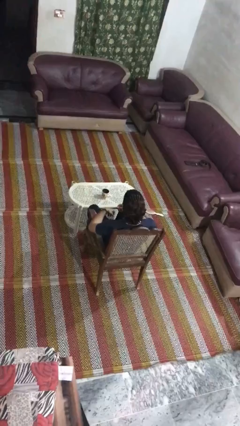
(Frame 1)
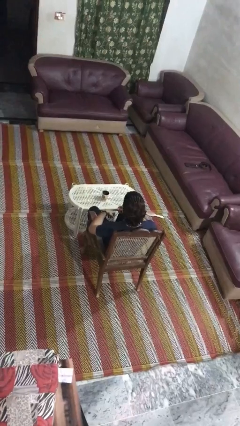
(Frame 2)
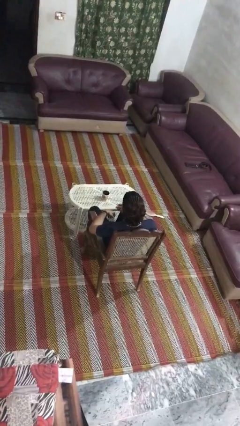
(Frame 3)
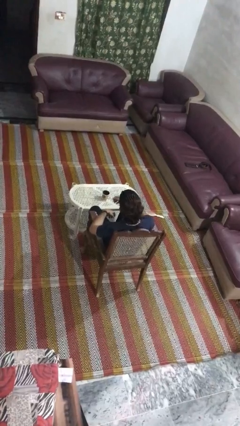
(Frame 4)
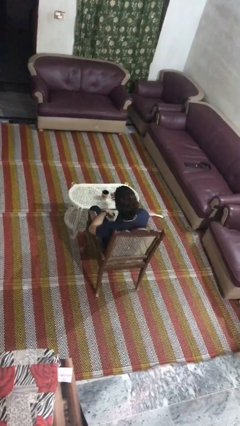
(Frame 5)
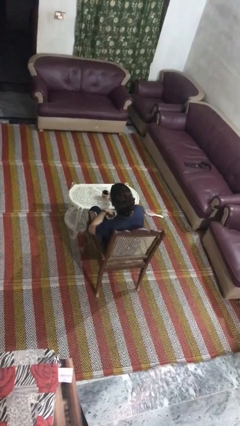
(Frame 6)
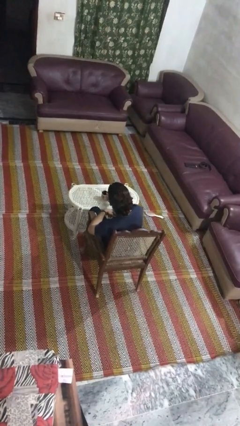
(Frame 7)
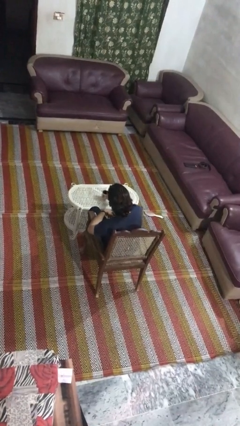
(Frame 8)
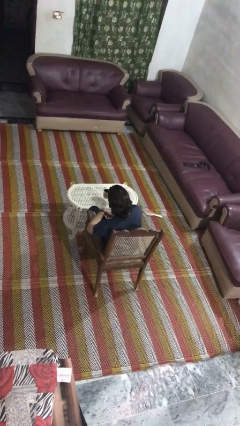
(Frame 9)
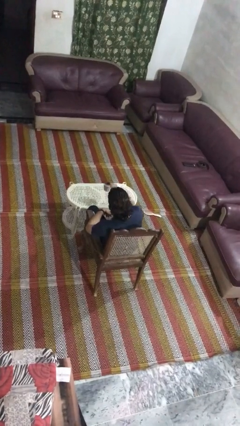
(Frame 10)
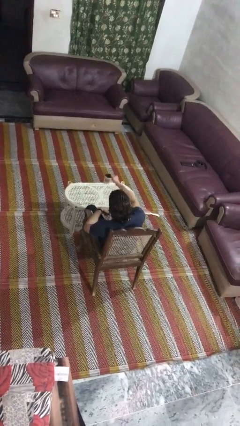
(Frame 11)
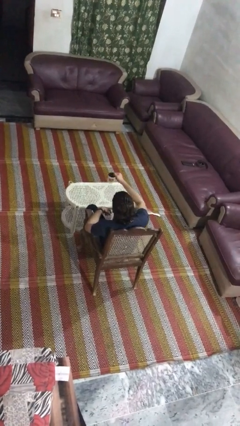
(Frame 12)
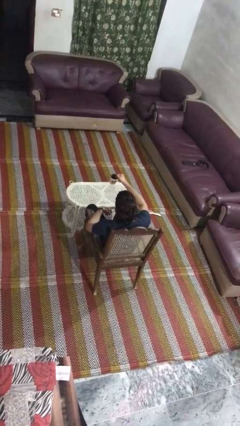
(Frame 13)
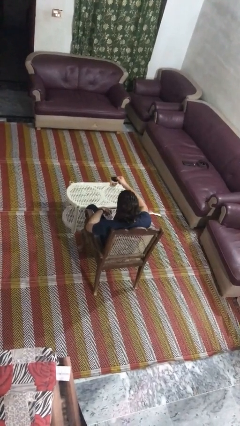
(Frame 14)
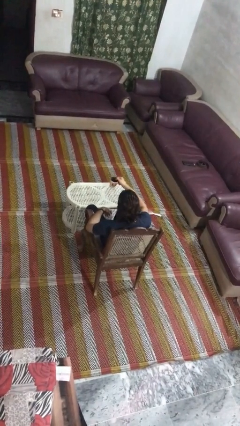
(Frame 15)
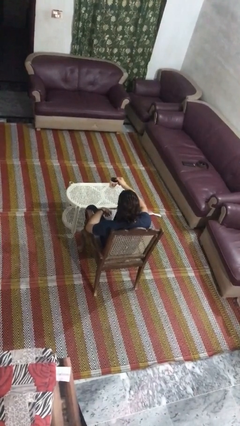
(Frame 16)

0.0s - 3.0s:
person picks up object from table

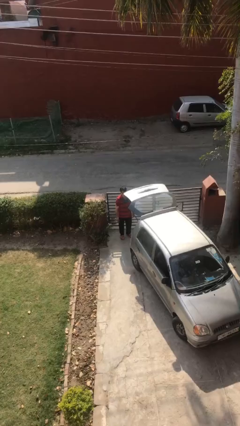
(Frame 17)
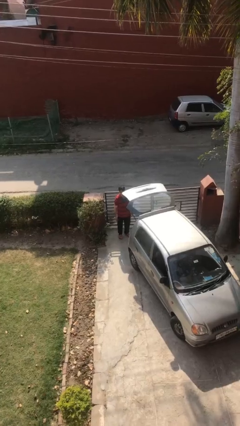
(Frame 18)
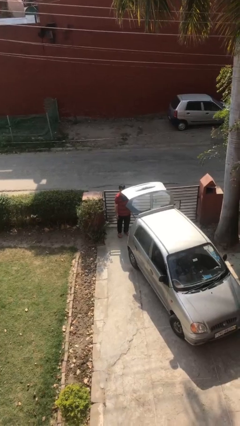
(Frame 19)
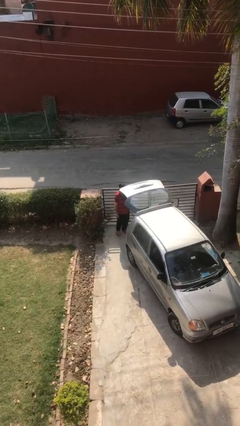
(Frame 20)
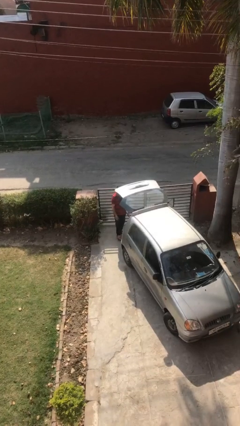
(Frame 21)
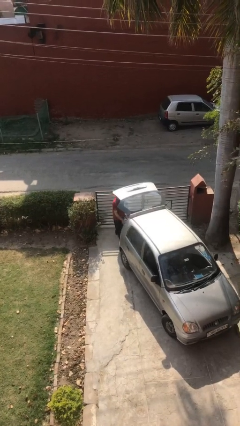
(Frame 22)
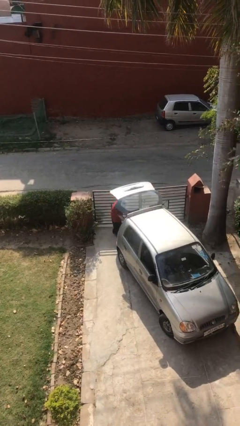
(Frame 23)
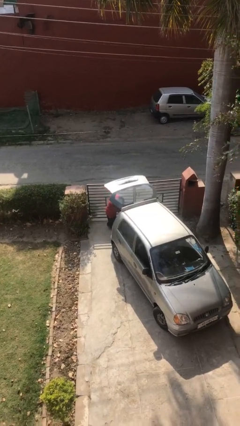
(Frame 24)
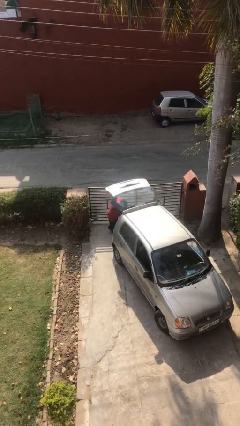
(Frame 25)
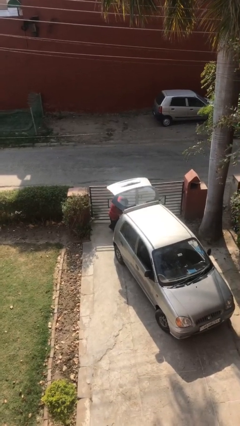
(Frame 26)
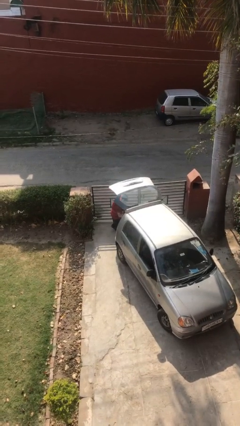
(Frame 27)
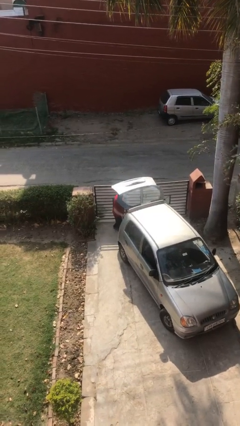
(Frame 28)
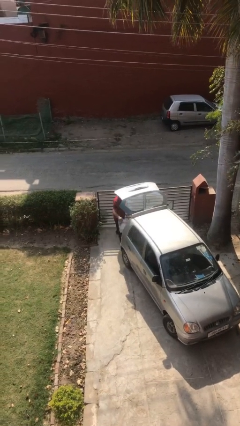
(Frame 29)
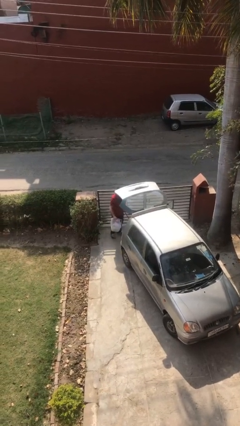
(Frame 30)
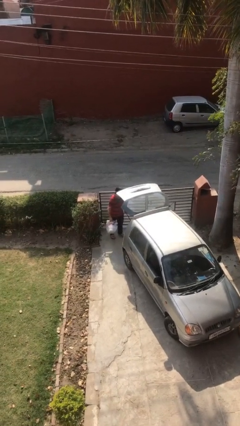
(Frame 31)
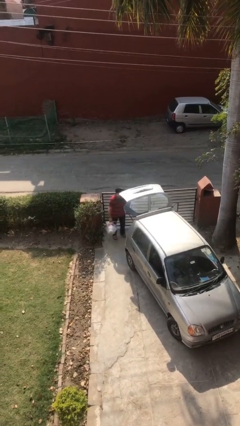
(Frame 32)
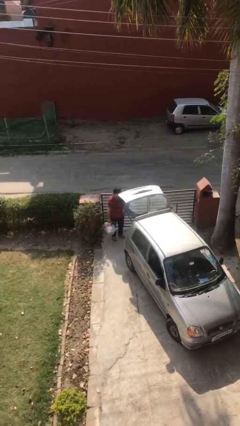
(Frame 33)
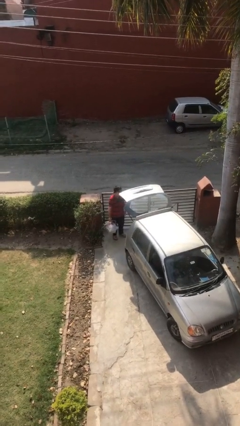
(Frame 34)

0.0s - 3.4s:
person unloads car

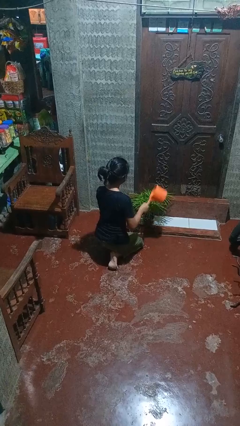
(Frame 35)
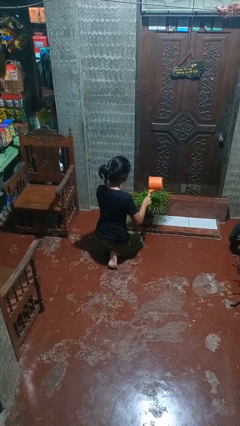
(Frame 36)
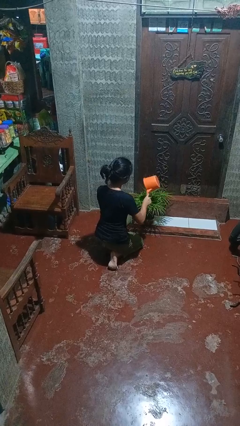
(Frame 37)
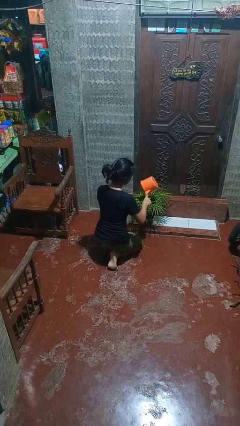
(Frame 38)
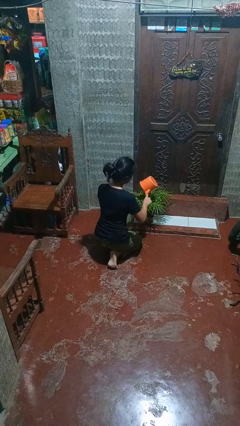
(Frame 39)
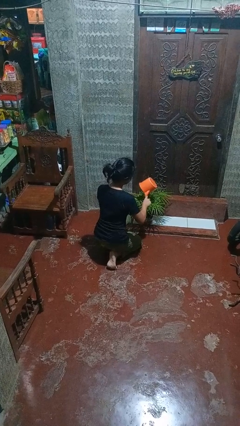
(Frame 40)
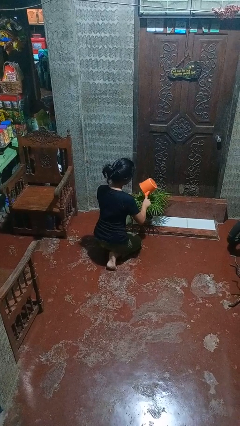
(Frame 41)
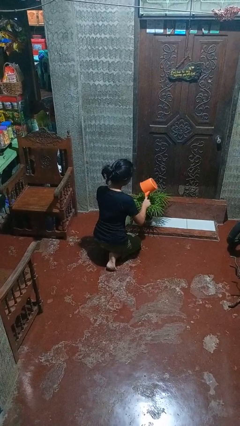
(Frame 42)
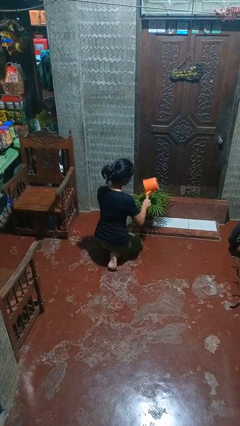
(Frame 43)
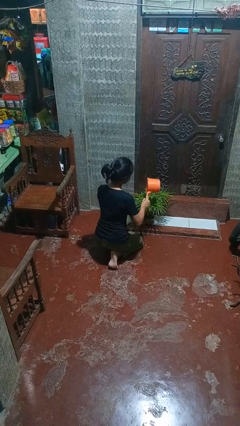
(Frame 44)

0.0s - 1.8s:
person waters houseplant

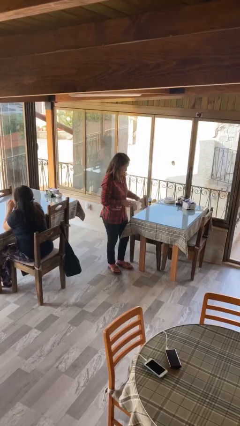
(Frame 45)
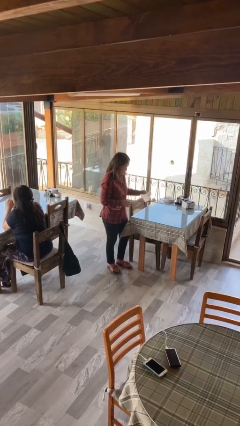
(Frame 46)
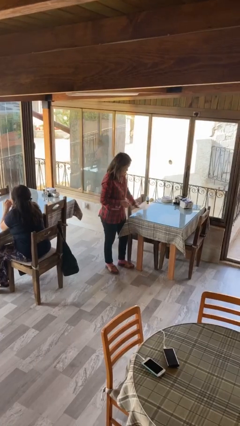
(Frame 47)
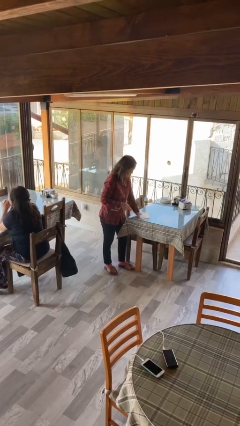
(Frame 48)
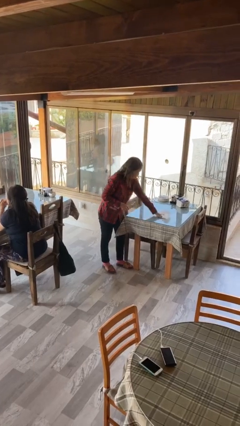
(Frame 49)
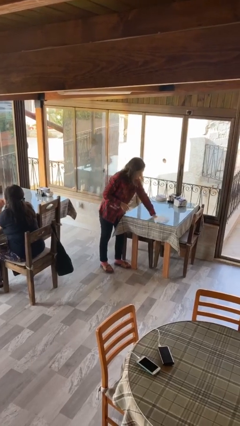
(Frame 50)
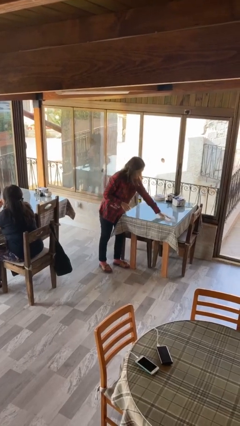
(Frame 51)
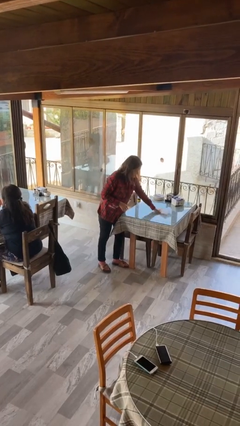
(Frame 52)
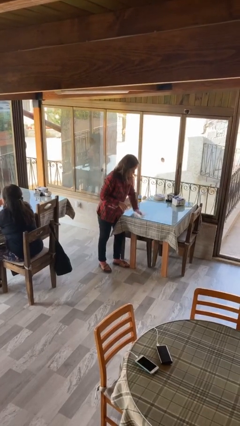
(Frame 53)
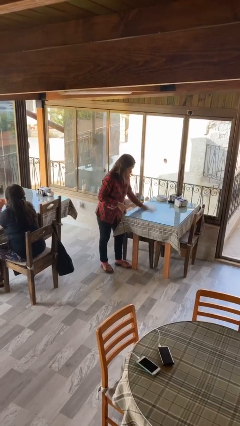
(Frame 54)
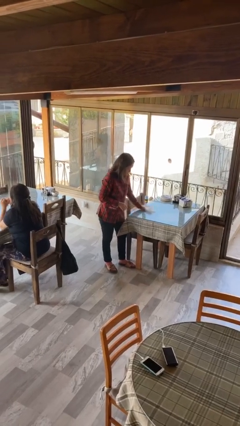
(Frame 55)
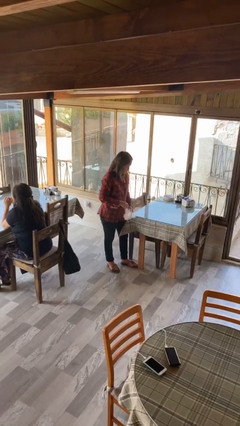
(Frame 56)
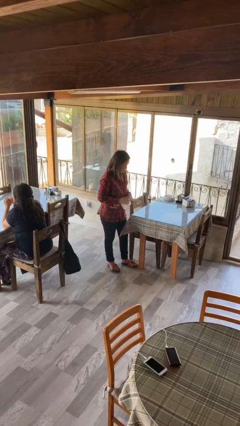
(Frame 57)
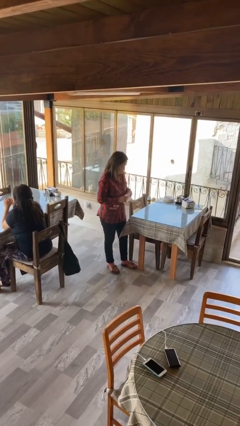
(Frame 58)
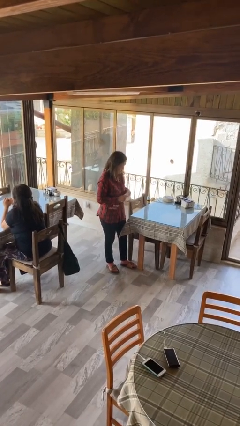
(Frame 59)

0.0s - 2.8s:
person cleans table with rag

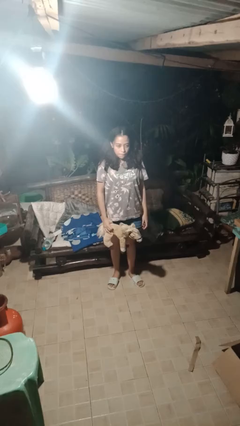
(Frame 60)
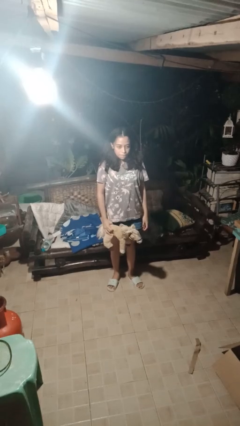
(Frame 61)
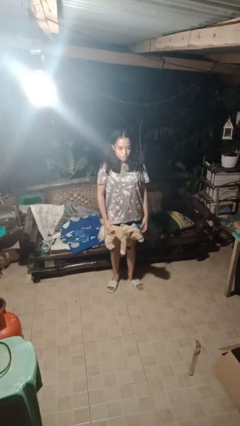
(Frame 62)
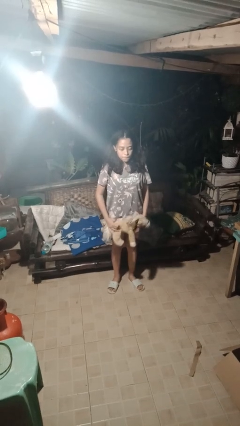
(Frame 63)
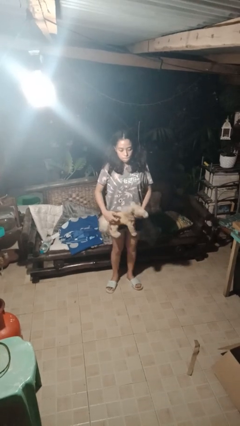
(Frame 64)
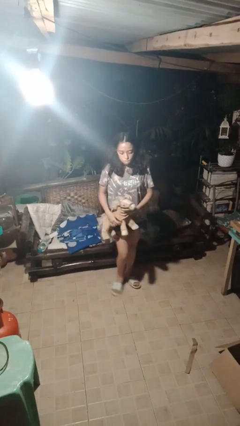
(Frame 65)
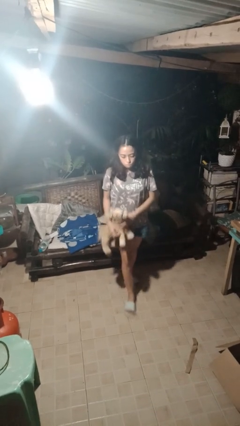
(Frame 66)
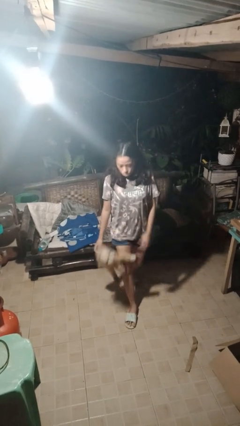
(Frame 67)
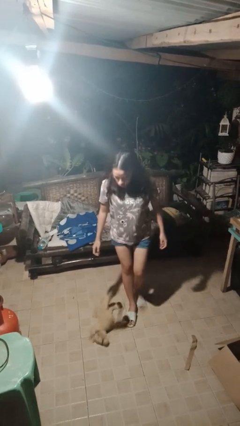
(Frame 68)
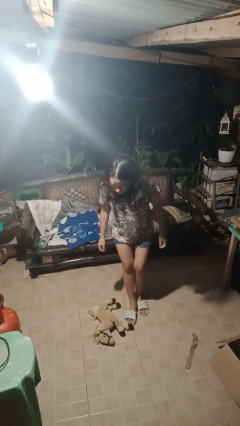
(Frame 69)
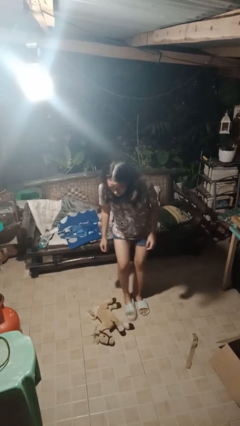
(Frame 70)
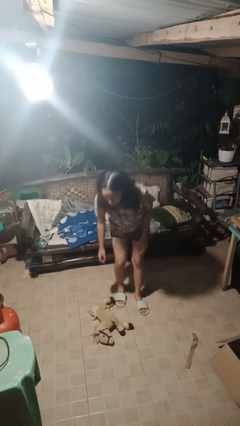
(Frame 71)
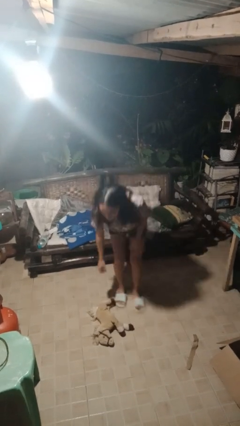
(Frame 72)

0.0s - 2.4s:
person drops object

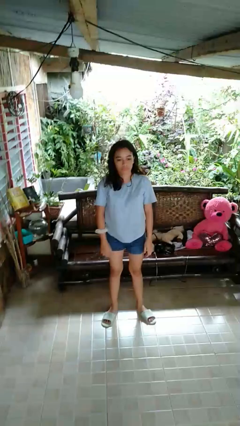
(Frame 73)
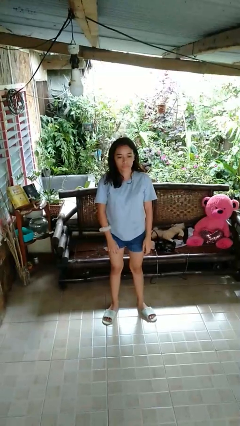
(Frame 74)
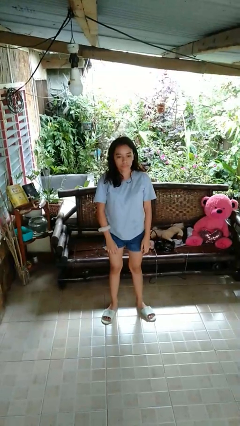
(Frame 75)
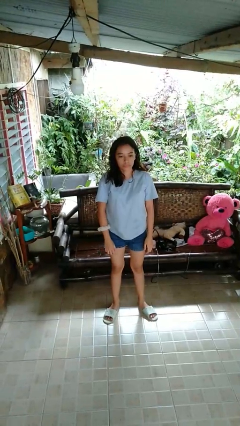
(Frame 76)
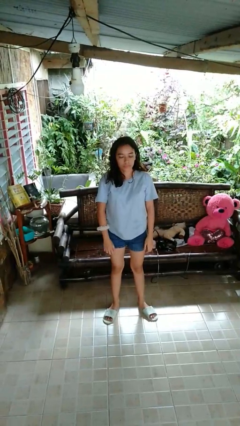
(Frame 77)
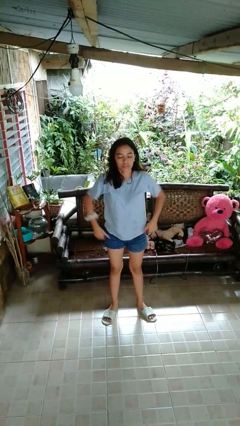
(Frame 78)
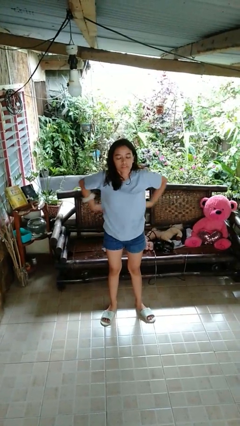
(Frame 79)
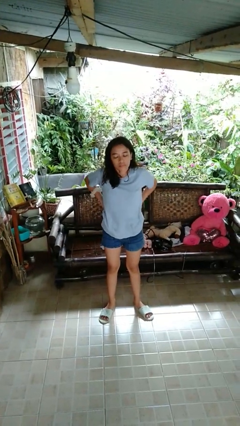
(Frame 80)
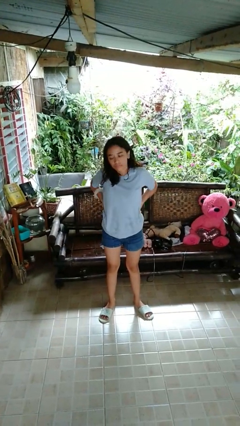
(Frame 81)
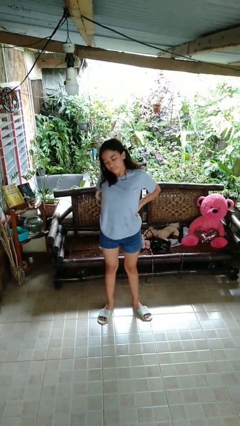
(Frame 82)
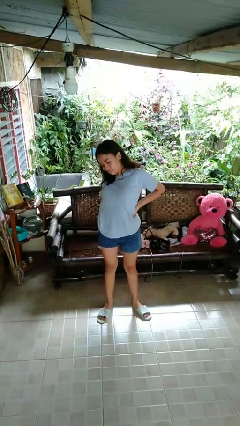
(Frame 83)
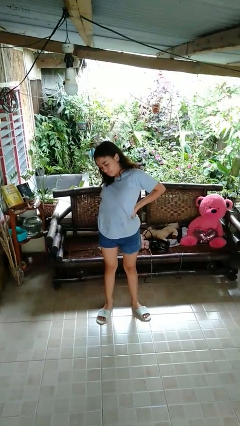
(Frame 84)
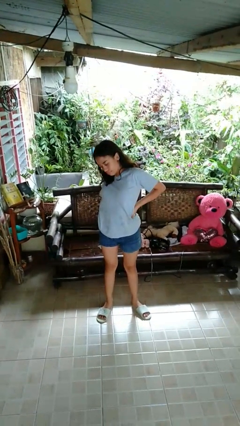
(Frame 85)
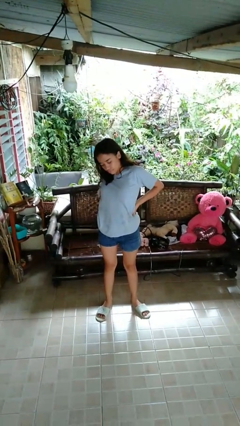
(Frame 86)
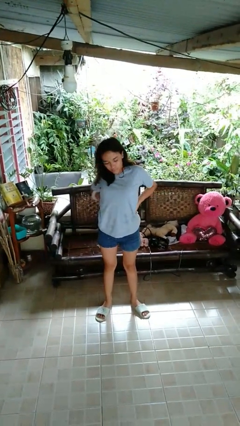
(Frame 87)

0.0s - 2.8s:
person stretches back

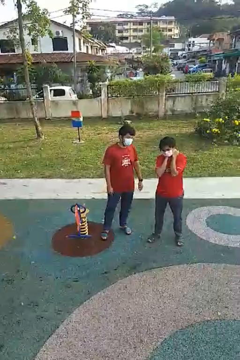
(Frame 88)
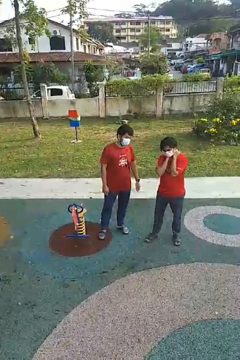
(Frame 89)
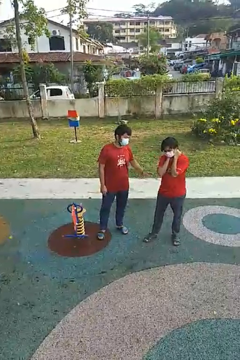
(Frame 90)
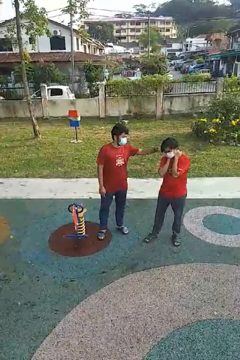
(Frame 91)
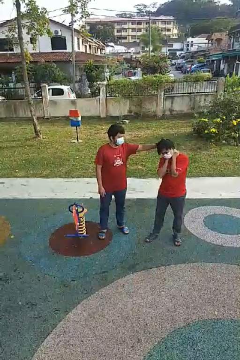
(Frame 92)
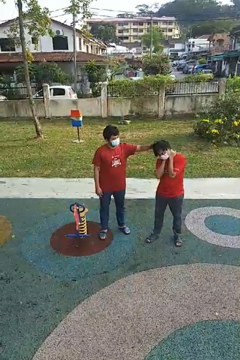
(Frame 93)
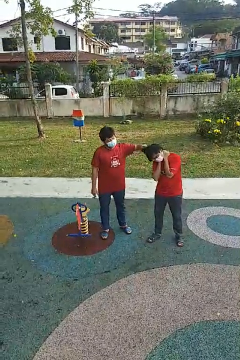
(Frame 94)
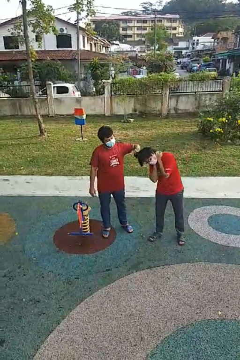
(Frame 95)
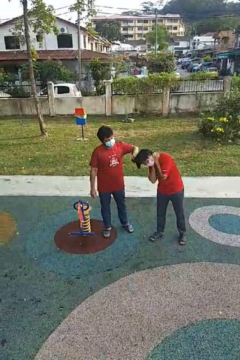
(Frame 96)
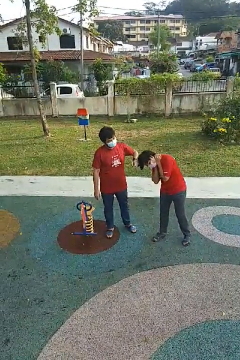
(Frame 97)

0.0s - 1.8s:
person grabs person by hair
